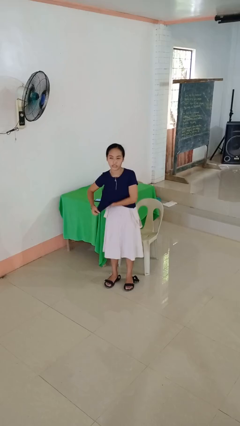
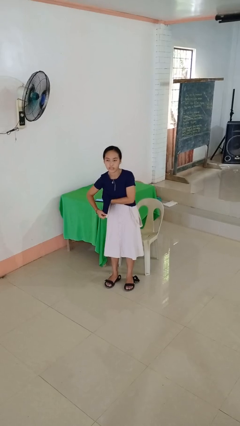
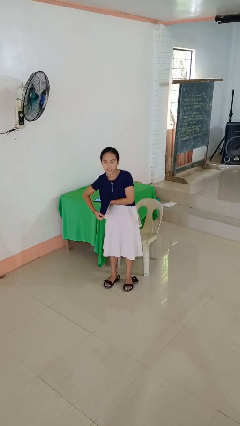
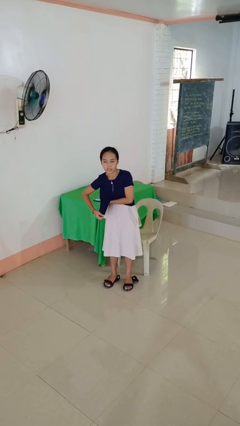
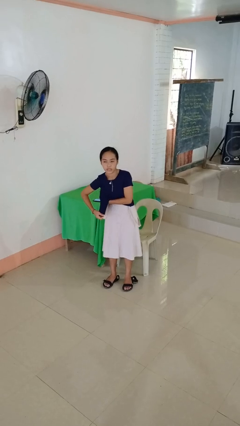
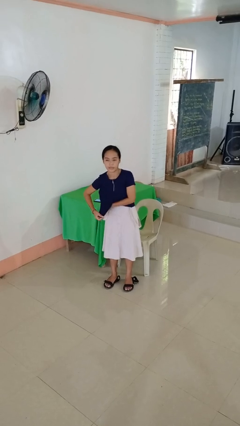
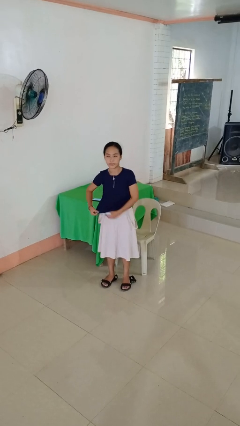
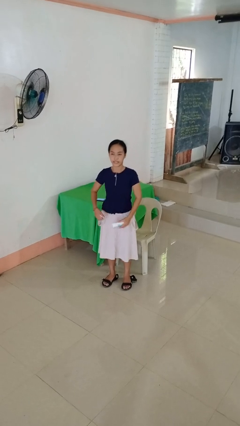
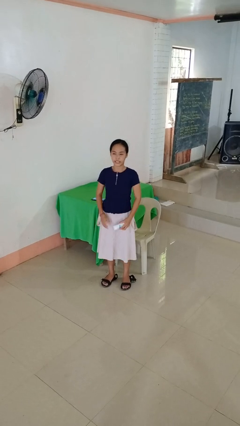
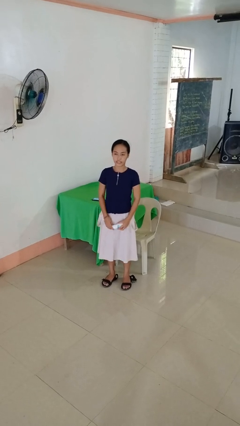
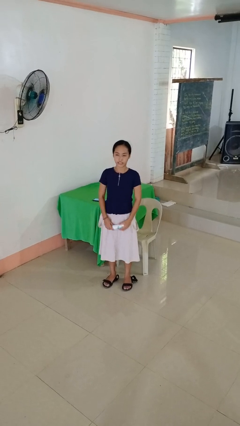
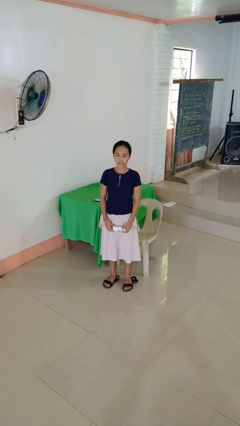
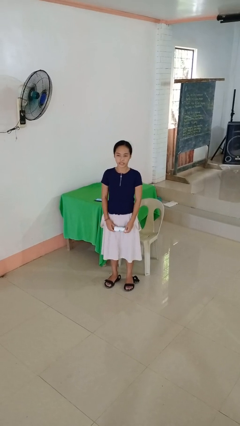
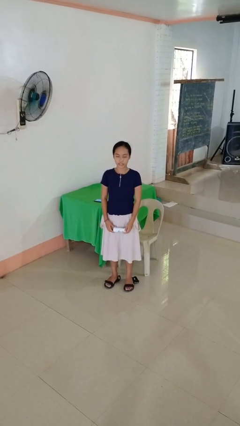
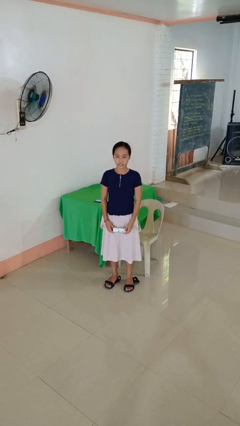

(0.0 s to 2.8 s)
person applies deodorant

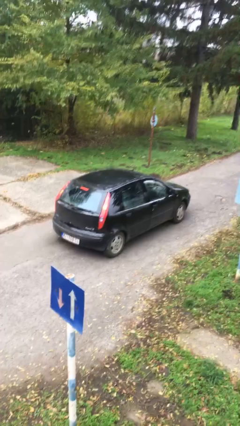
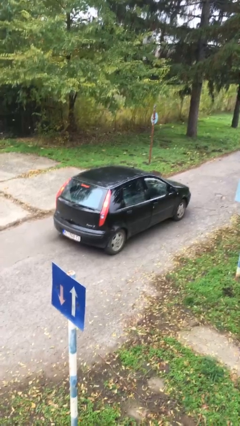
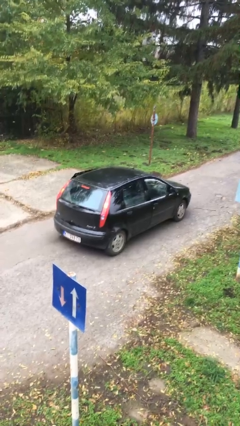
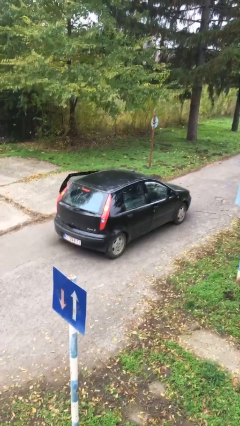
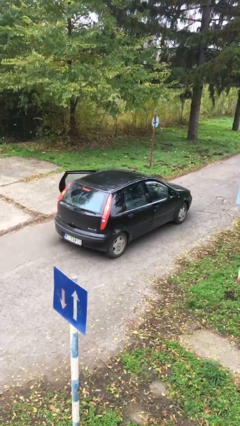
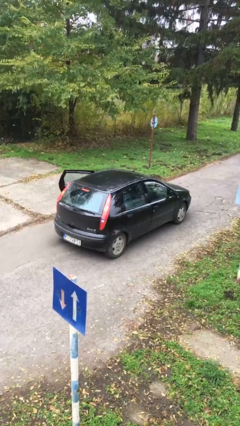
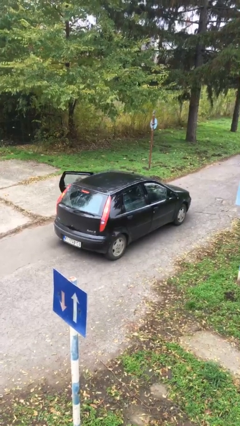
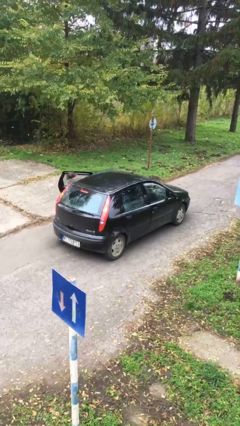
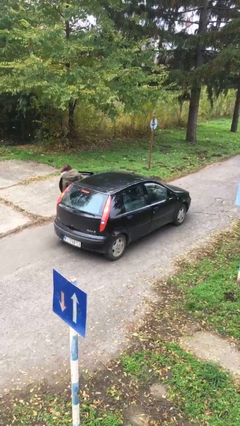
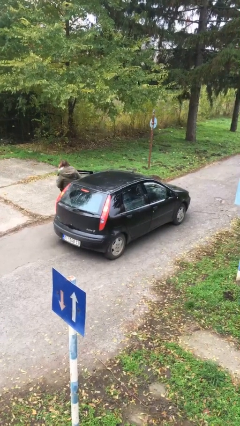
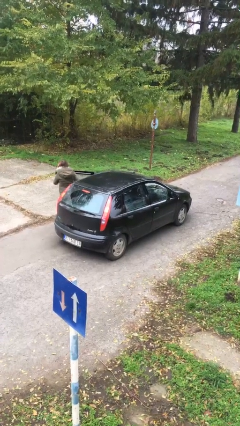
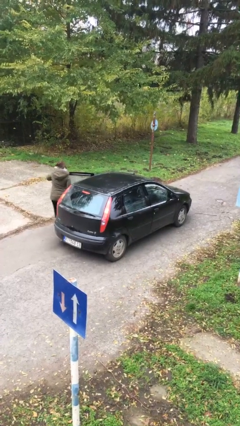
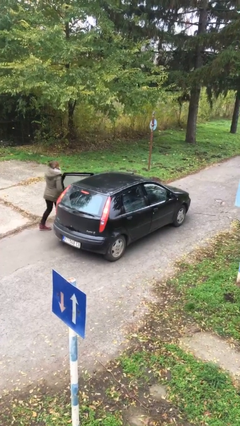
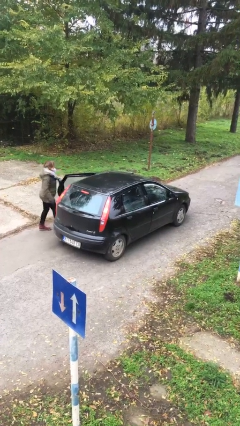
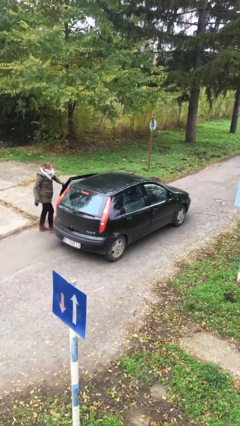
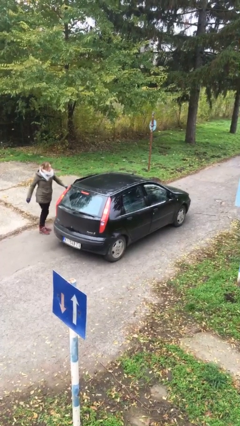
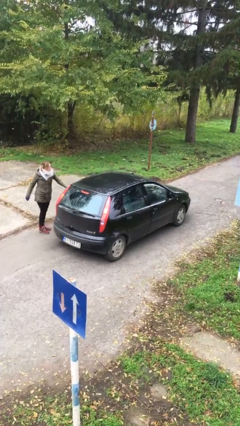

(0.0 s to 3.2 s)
car drops off person

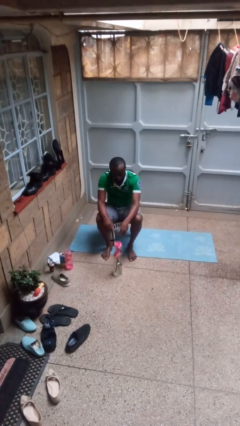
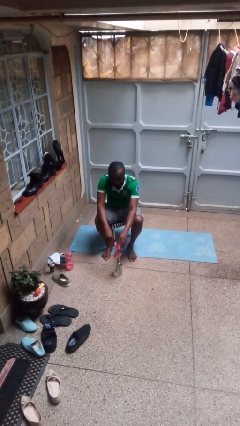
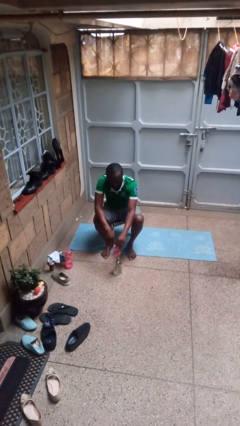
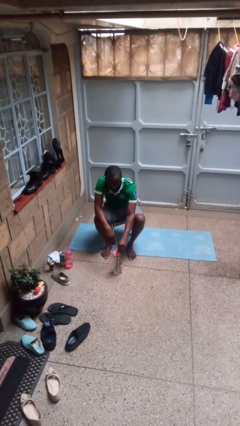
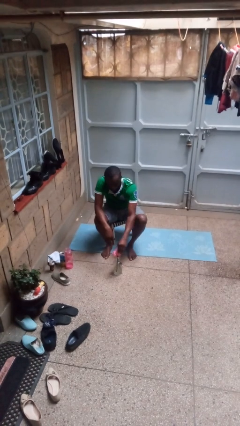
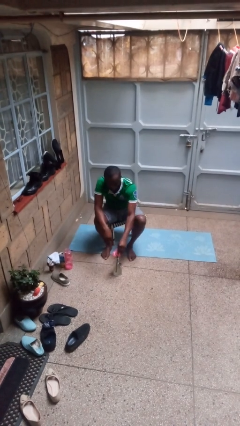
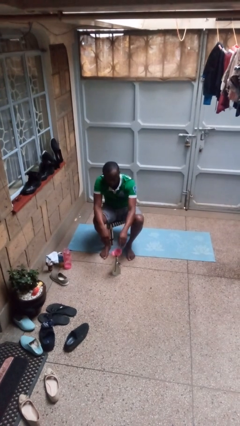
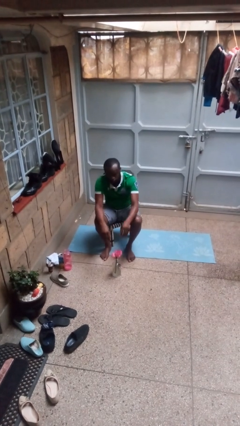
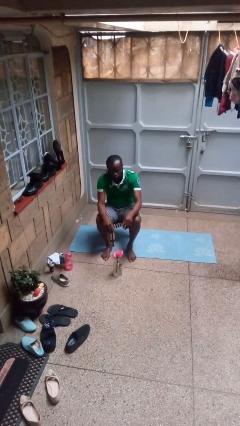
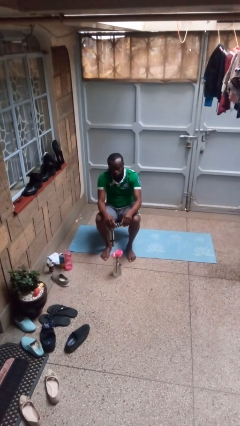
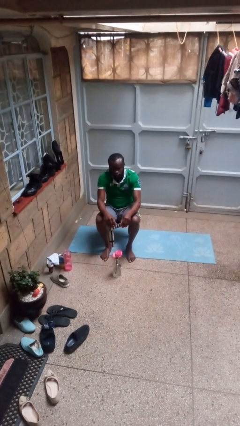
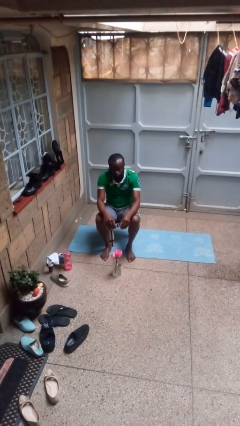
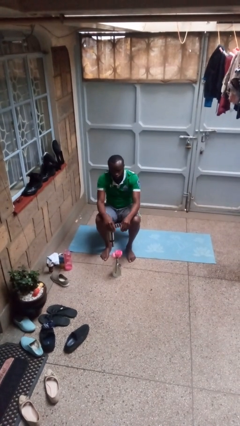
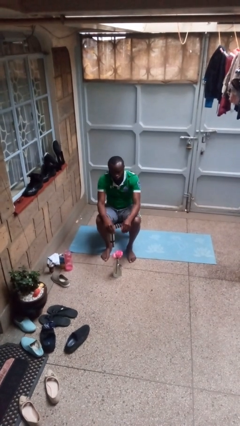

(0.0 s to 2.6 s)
person arranges flowers in vase

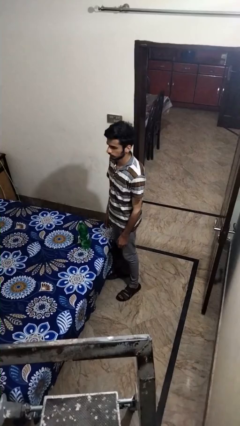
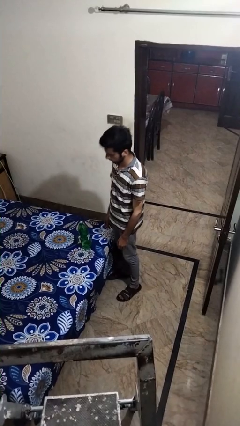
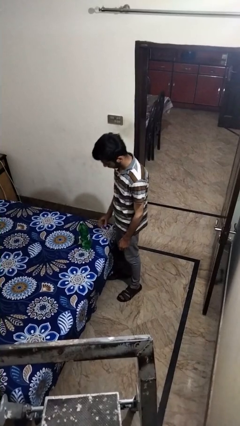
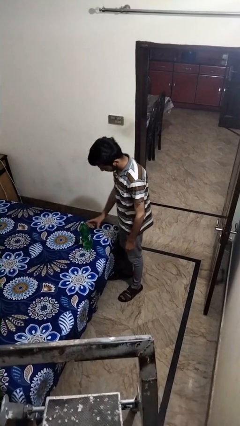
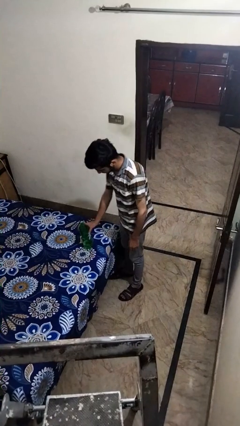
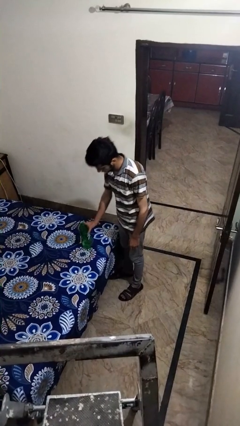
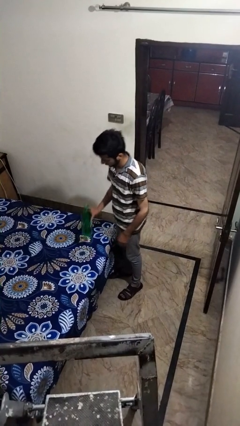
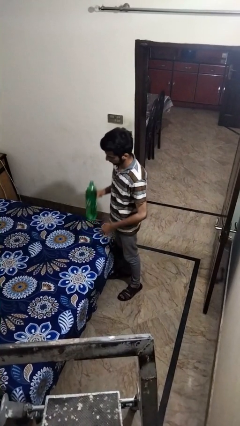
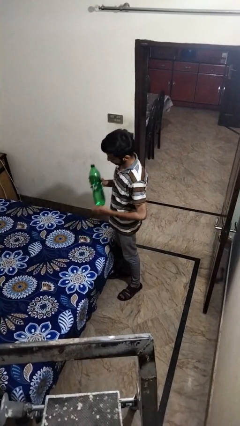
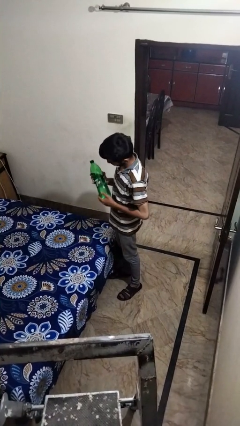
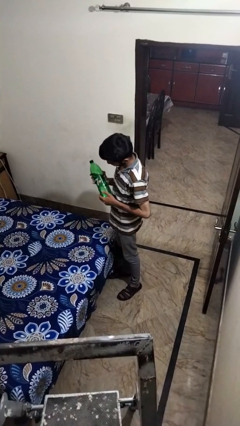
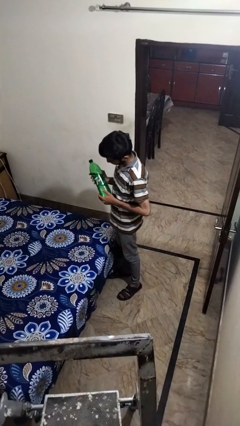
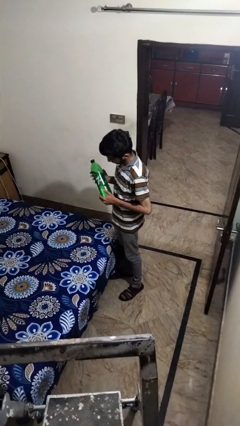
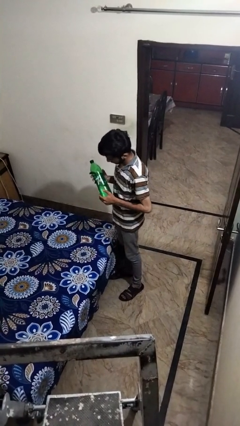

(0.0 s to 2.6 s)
person picks up object from bed

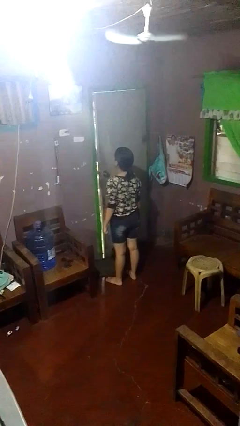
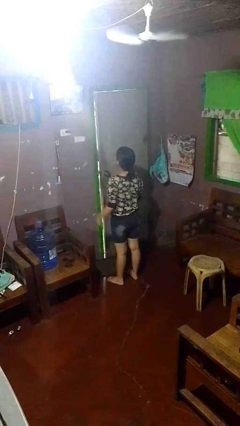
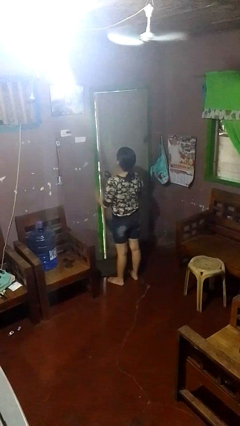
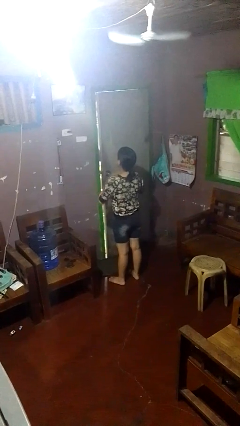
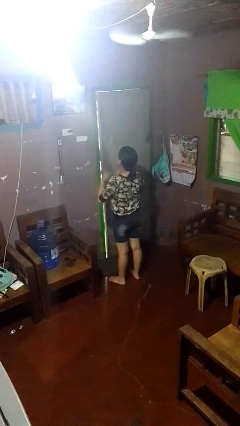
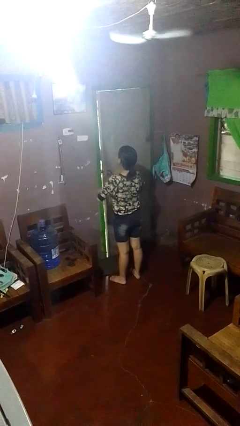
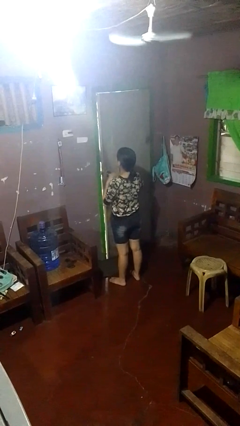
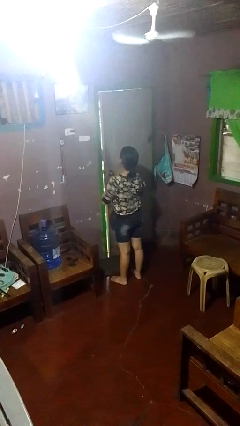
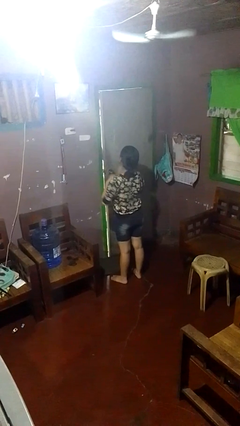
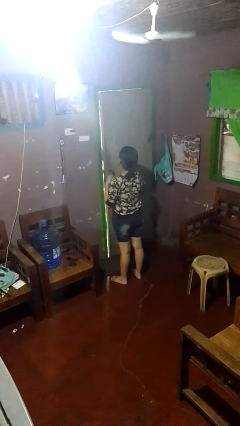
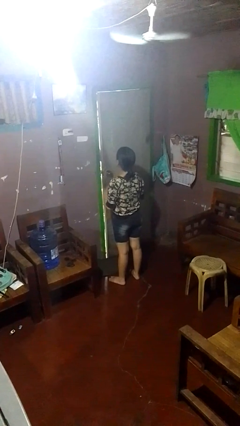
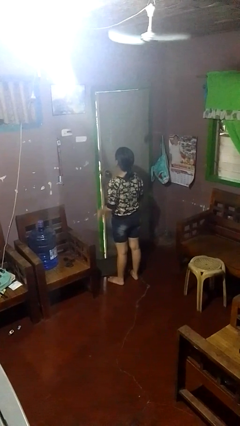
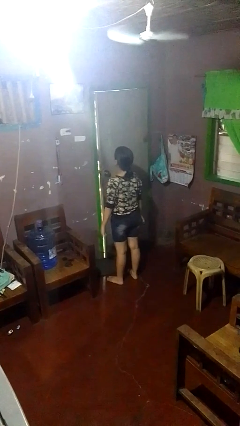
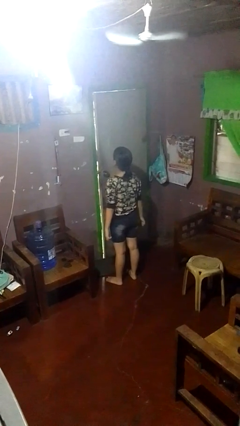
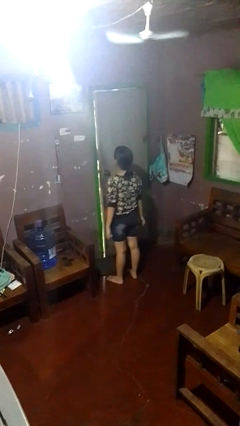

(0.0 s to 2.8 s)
person drums on chest

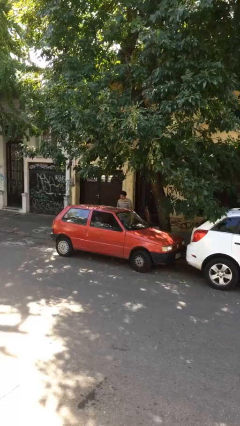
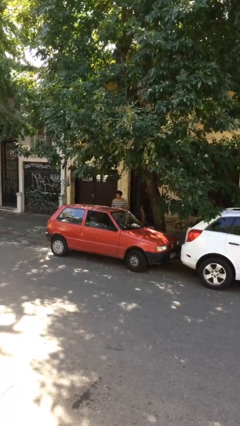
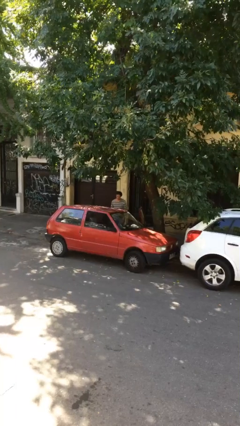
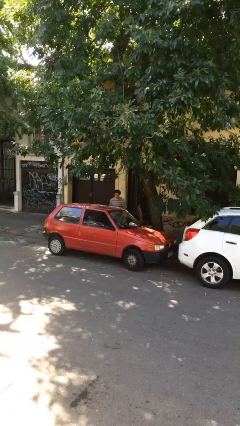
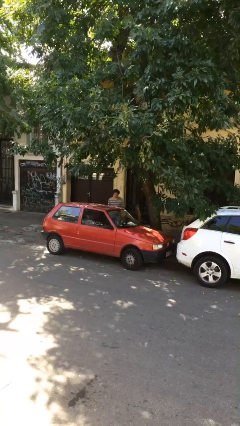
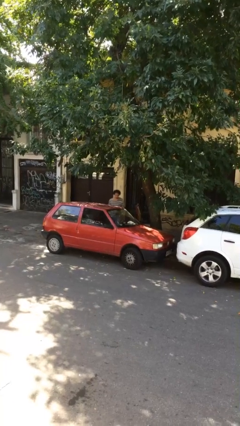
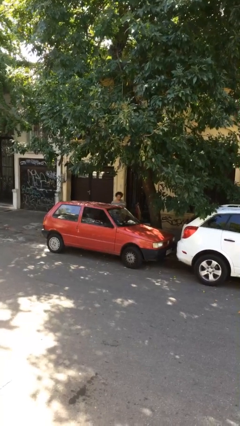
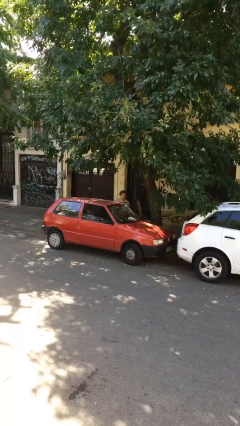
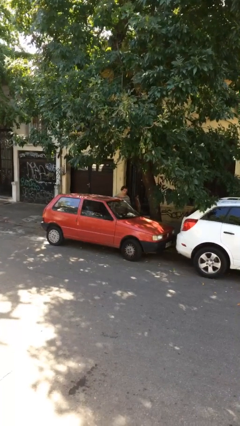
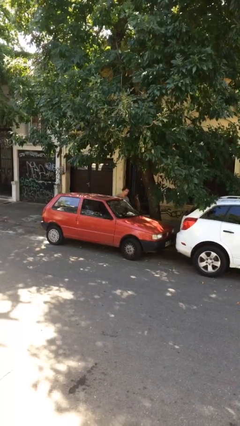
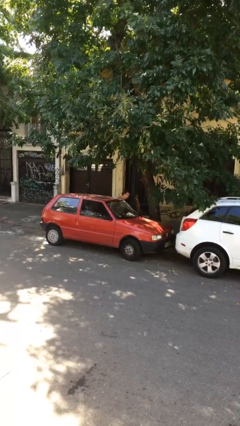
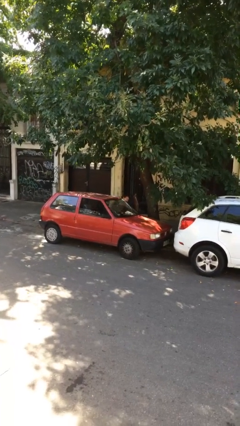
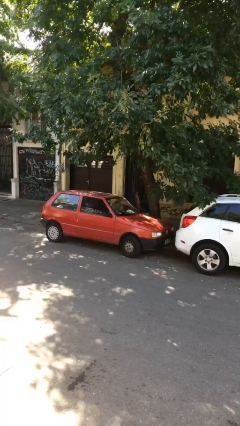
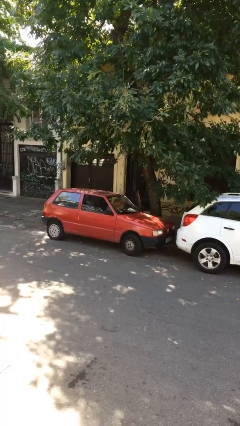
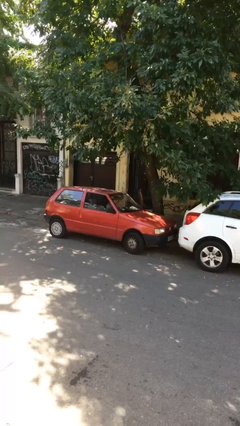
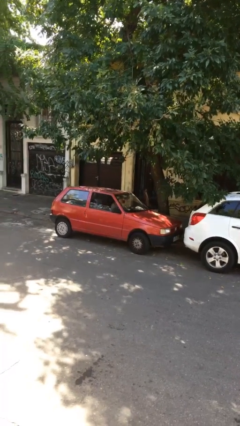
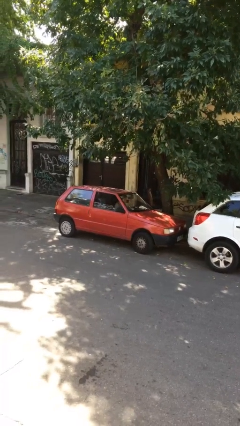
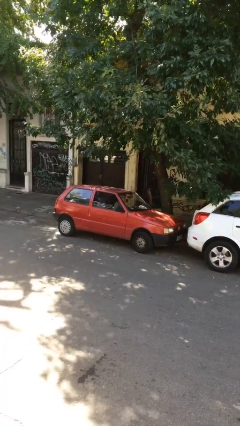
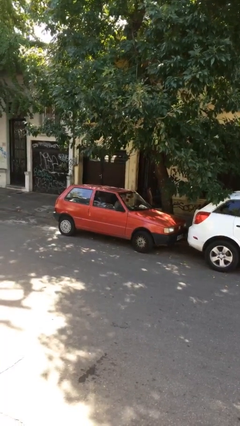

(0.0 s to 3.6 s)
person enters car
